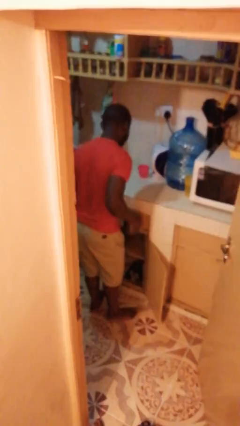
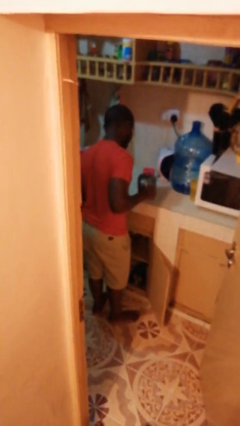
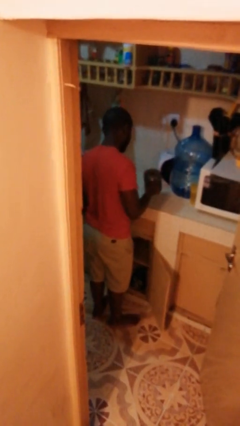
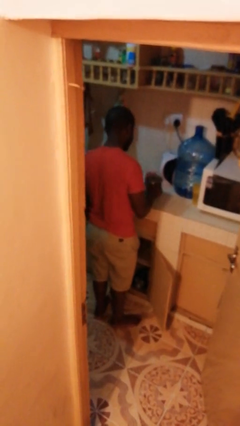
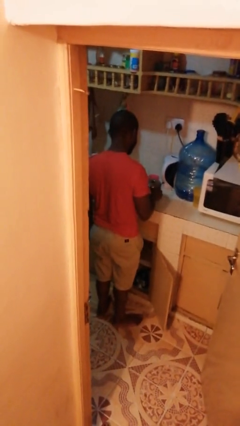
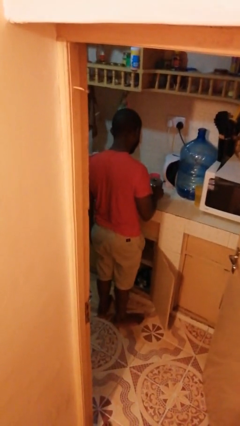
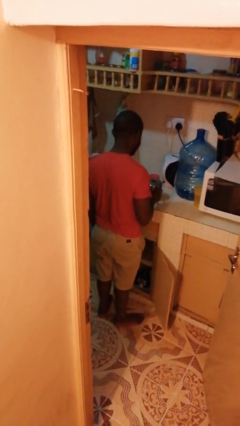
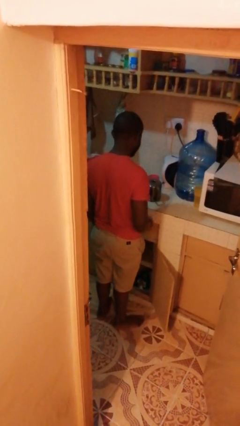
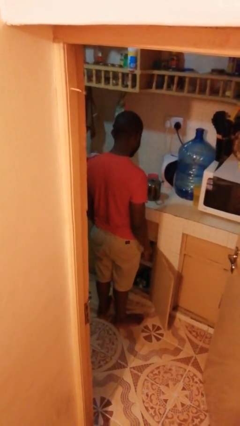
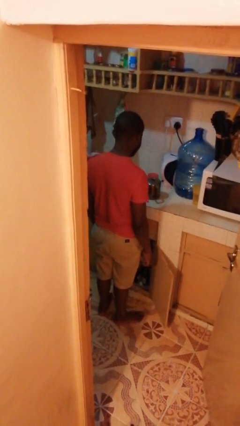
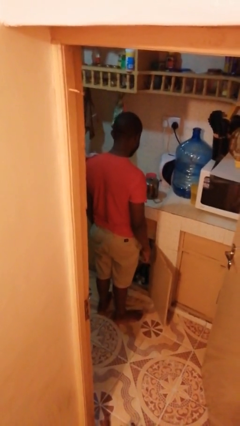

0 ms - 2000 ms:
person takes object from cabinet

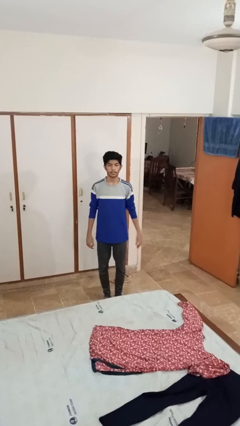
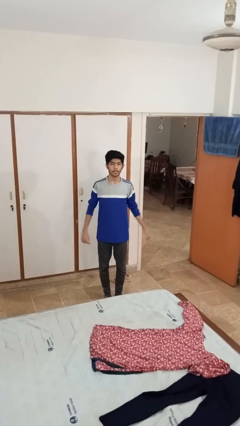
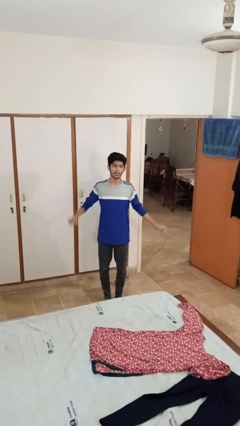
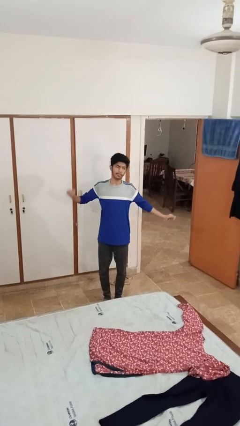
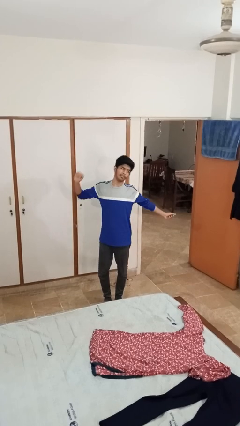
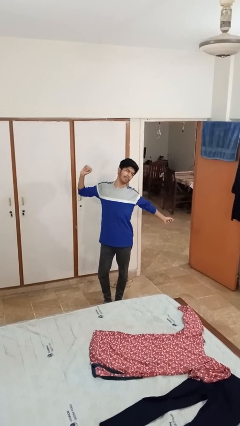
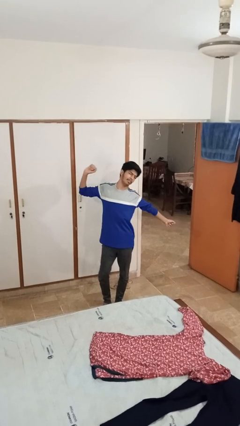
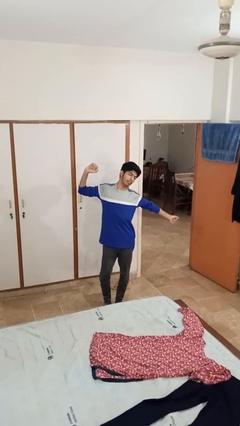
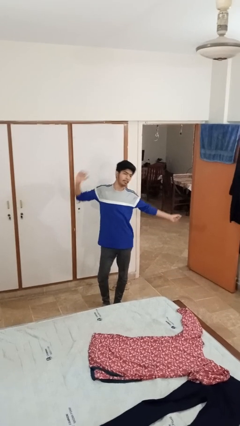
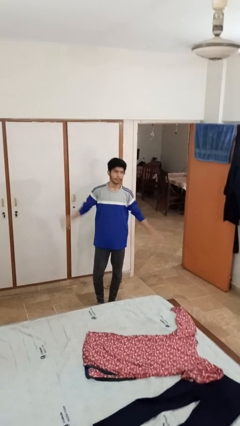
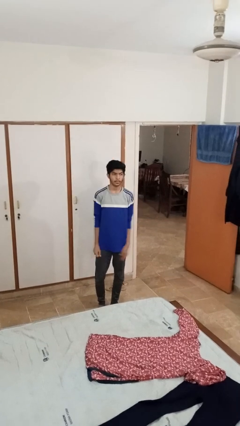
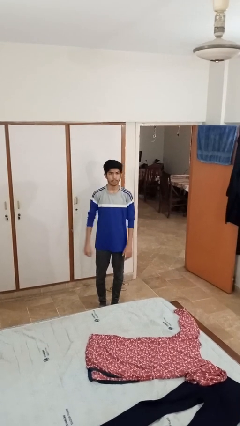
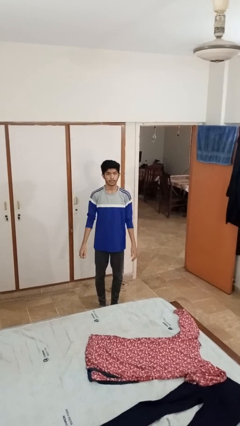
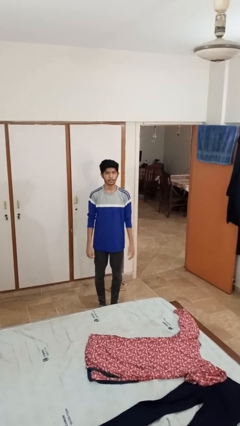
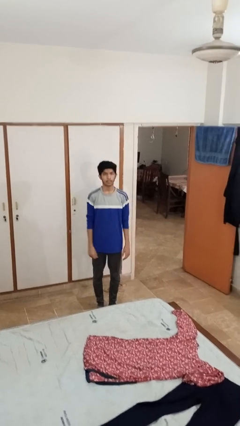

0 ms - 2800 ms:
person stretches arms to side

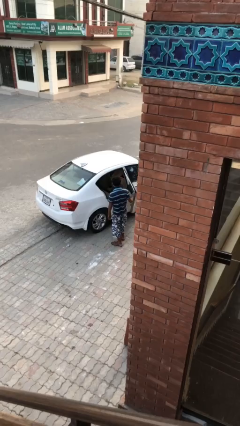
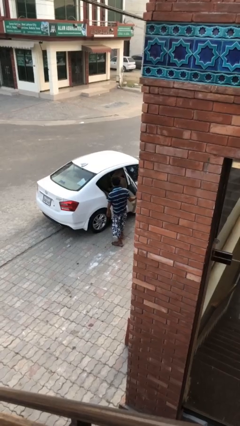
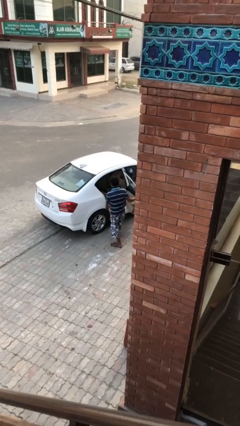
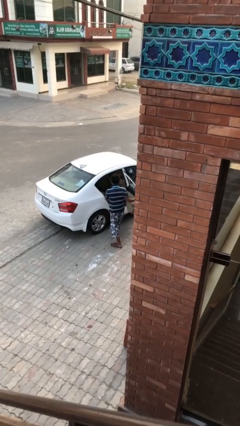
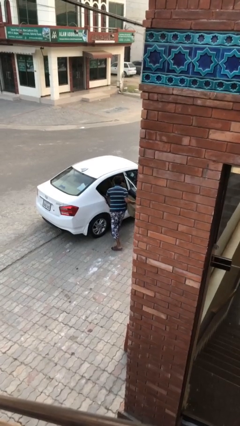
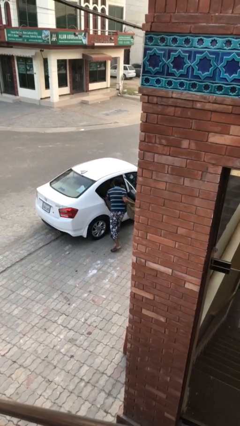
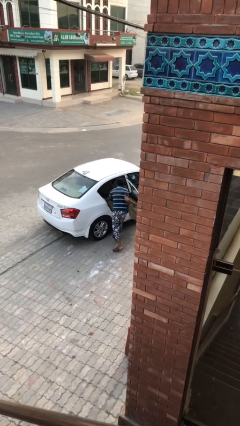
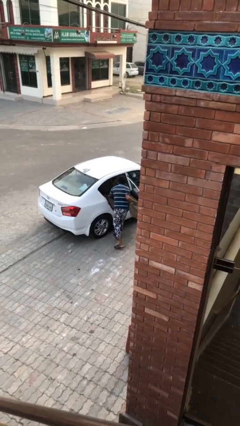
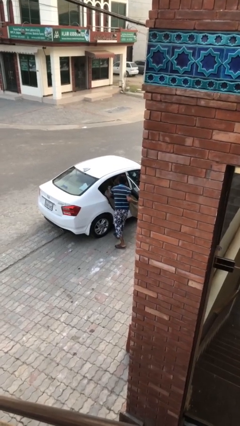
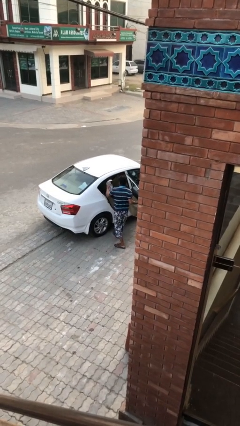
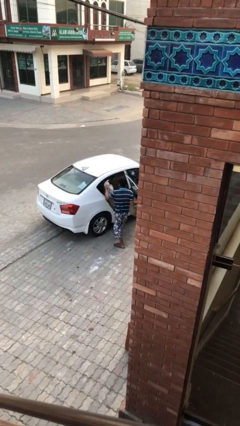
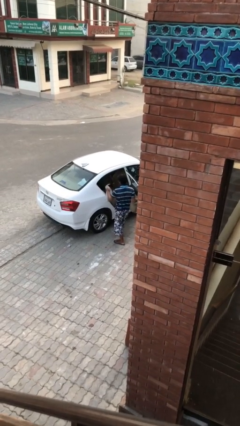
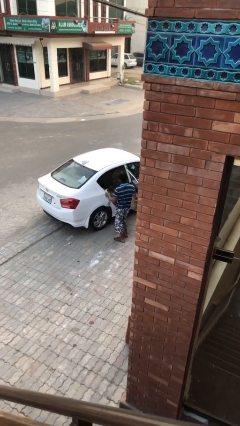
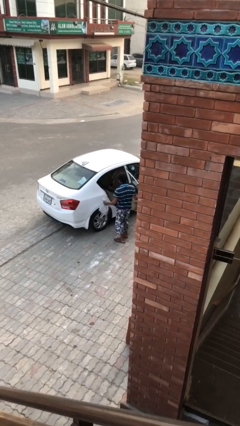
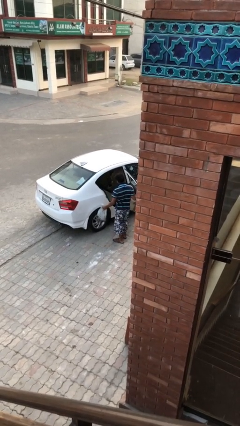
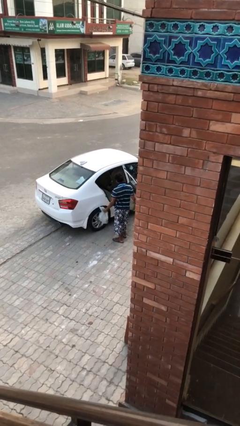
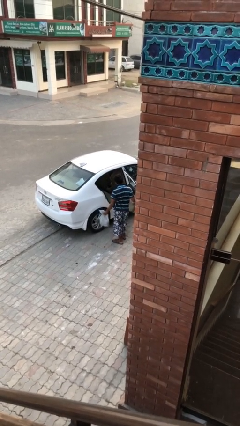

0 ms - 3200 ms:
person unloads car

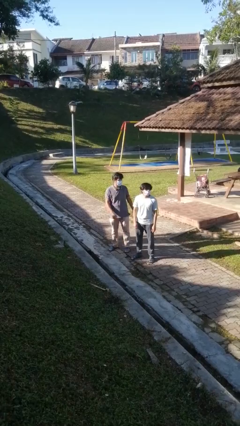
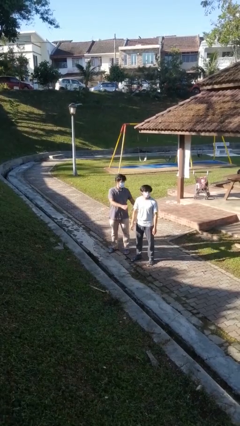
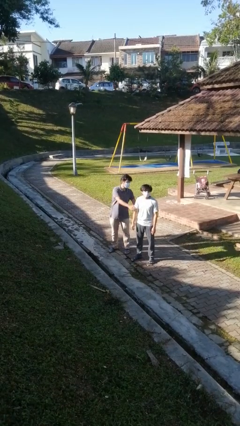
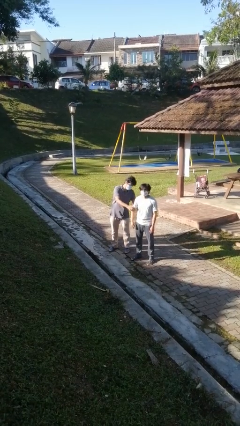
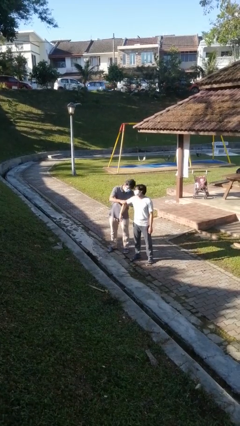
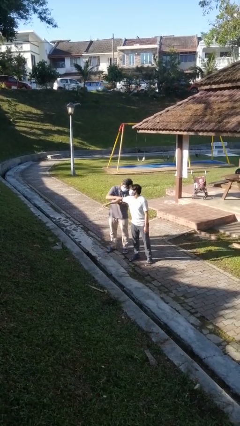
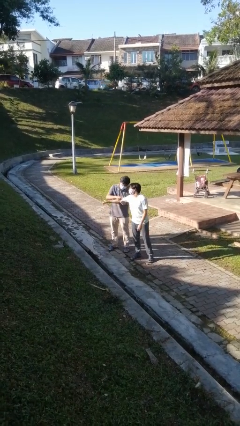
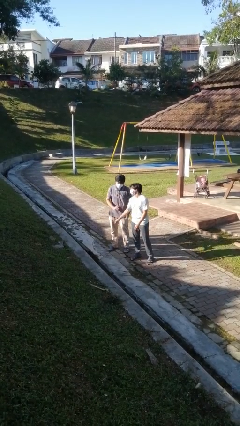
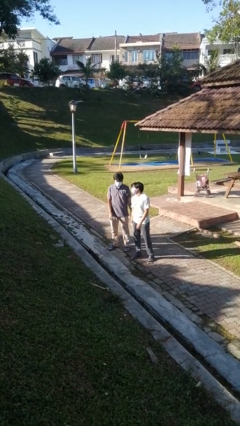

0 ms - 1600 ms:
person grabs person by bicep

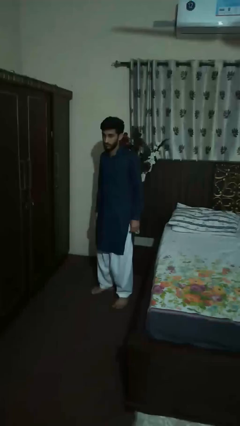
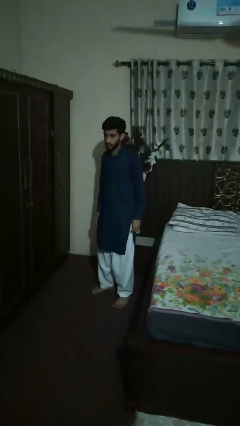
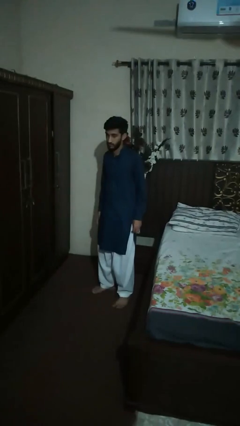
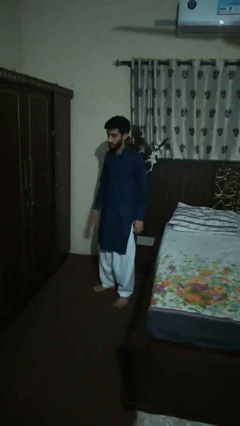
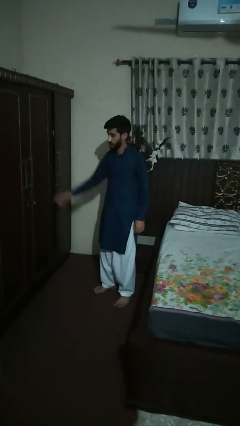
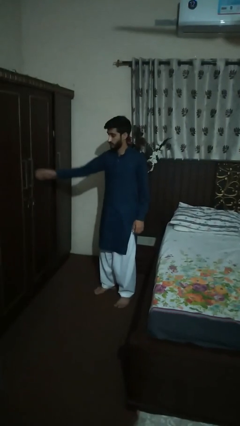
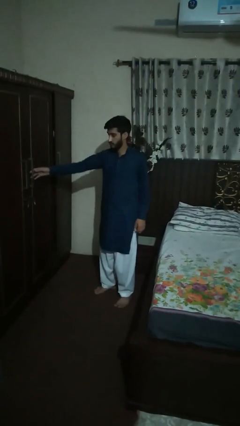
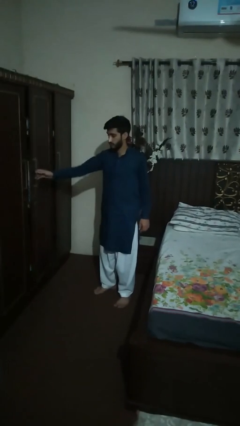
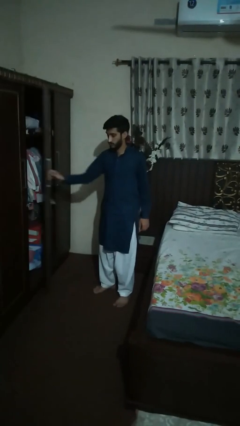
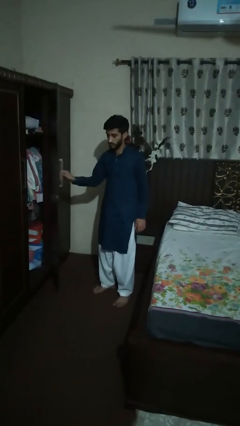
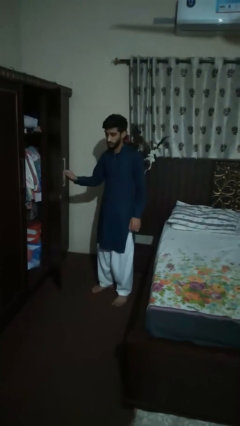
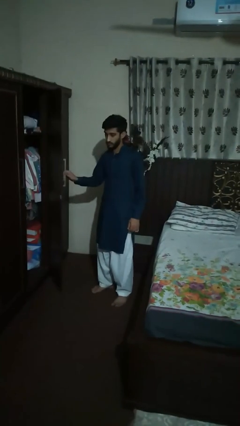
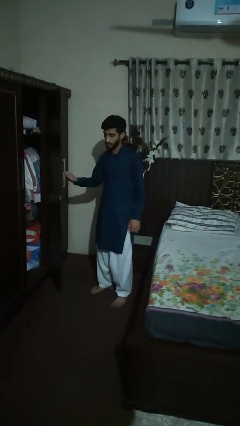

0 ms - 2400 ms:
person opens dresser drawer

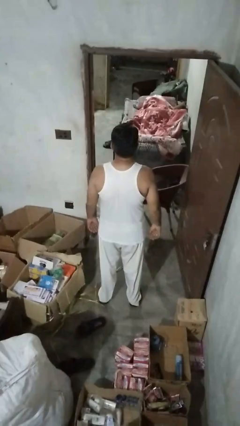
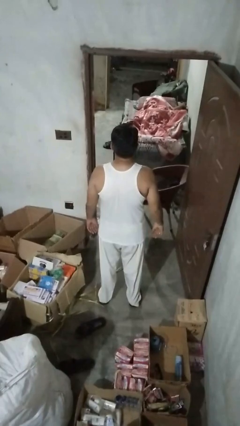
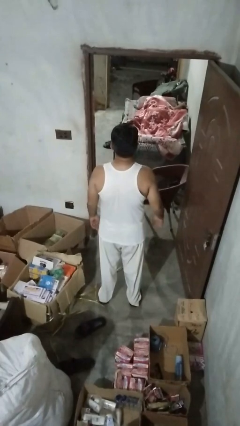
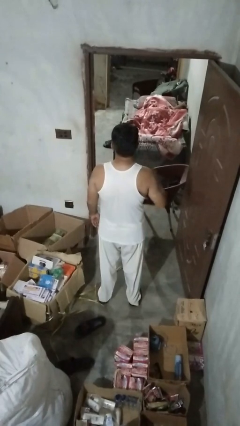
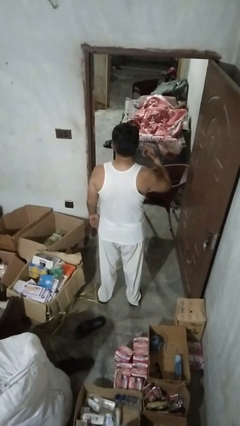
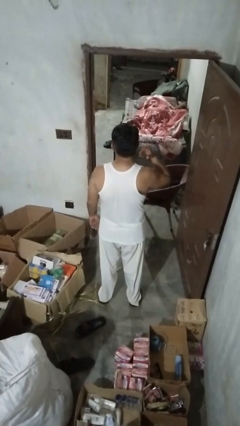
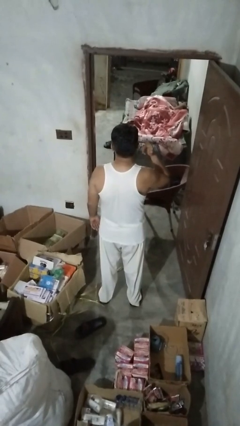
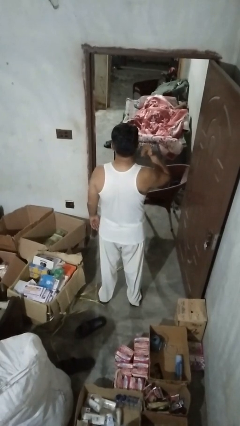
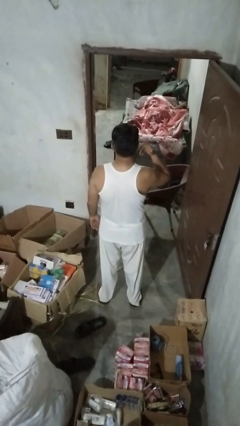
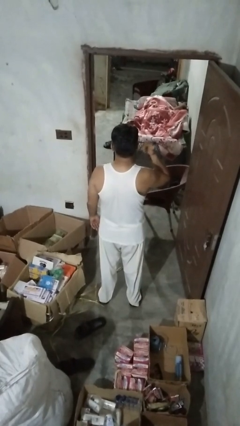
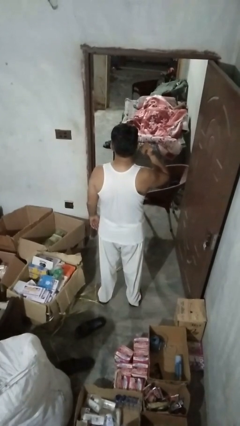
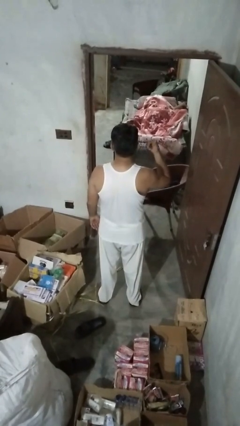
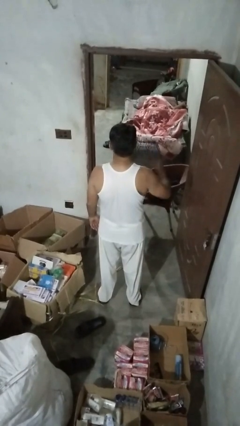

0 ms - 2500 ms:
person touches earlobe

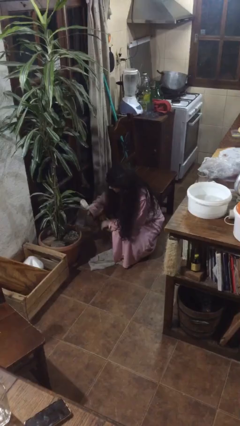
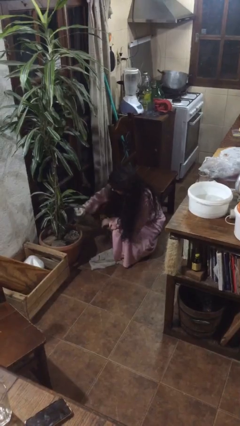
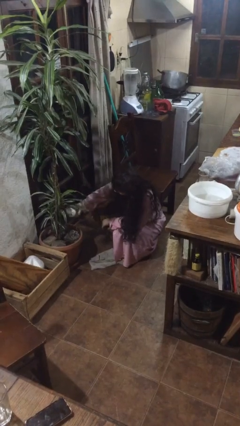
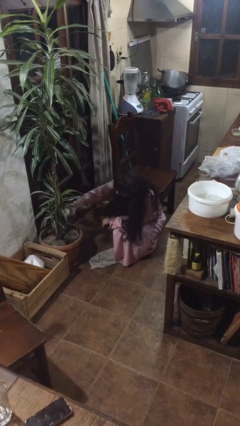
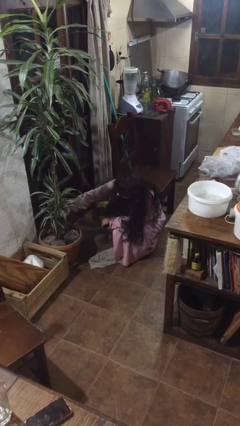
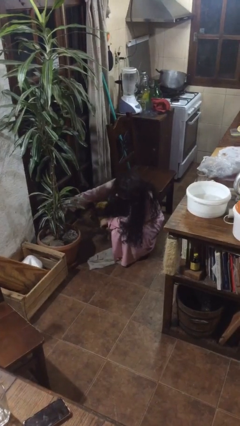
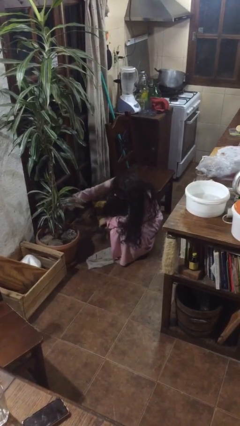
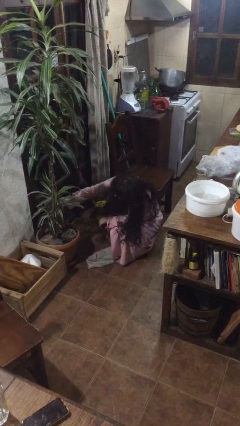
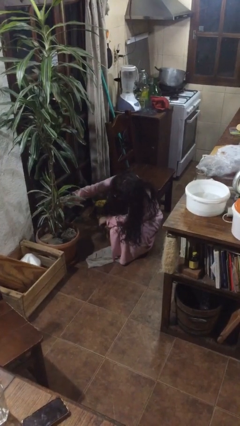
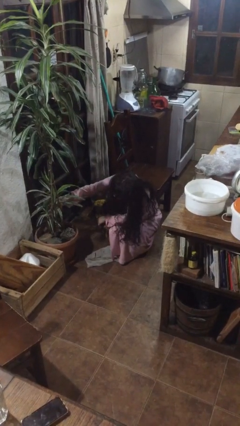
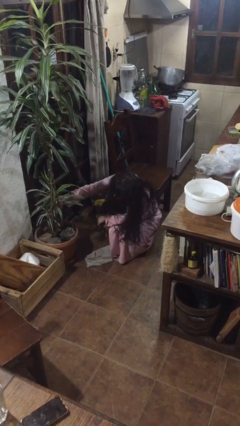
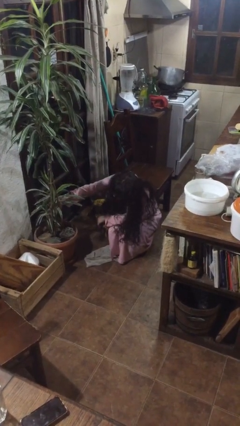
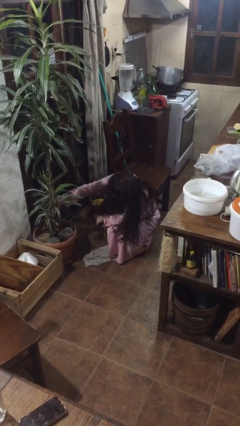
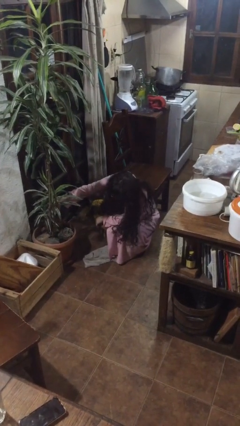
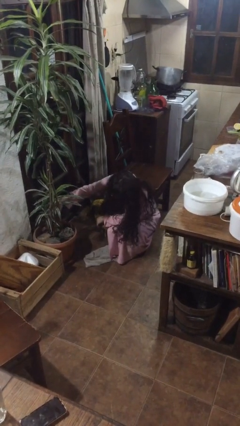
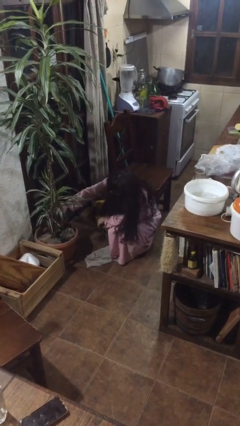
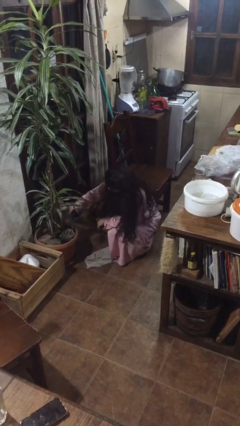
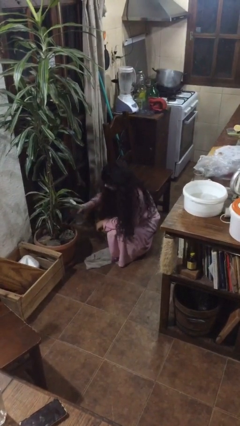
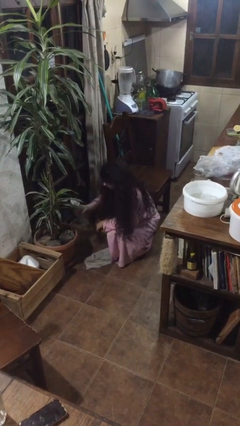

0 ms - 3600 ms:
person waters houseplant
